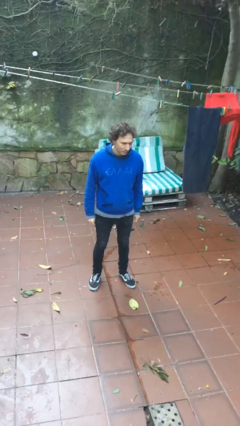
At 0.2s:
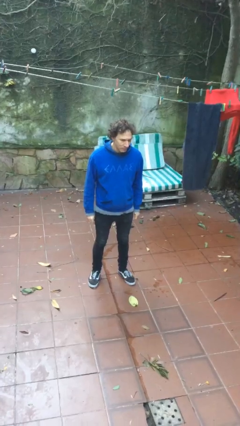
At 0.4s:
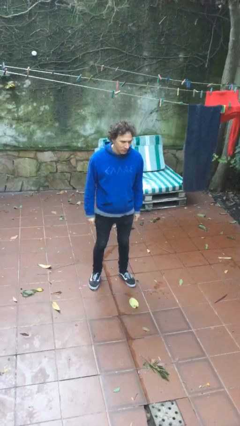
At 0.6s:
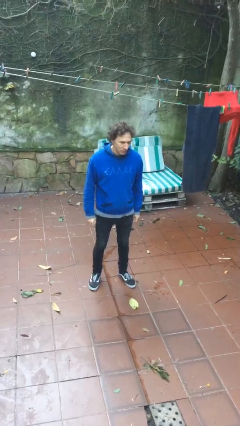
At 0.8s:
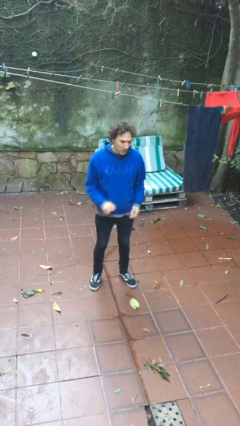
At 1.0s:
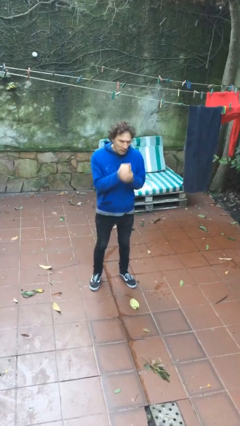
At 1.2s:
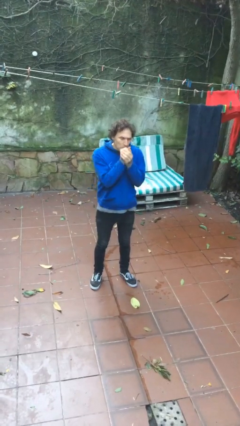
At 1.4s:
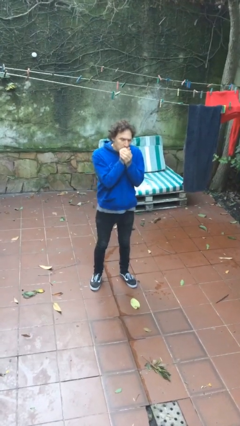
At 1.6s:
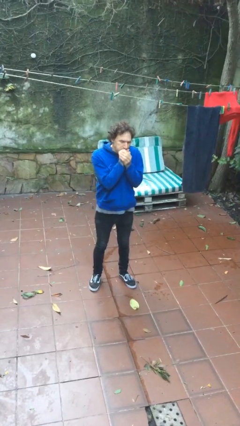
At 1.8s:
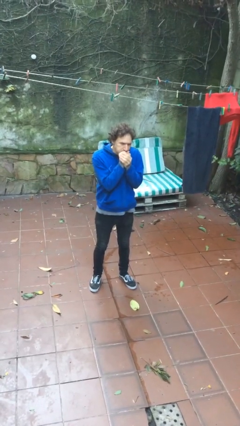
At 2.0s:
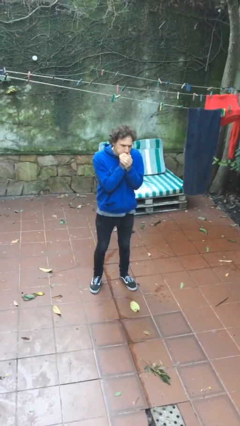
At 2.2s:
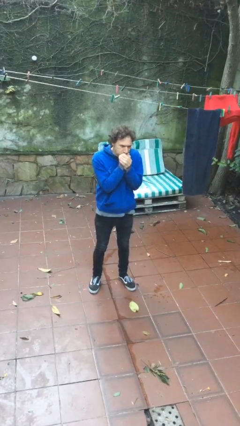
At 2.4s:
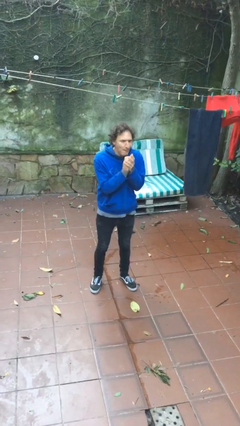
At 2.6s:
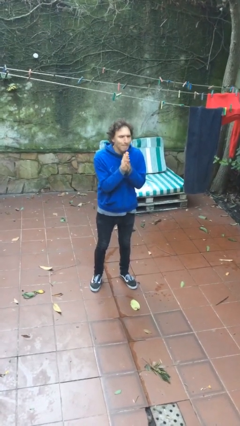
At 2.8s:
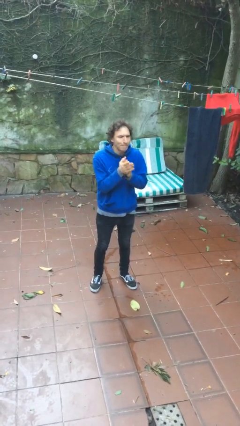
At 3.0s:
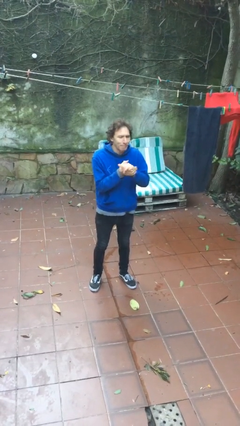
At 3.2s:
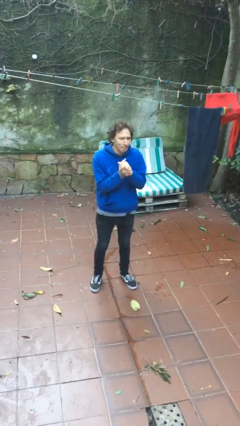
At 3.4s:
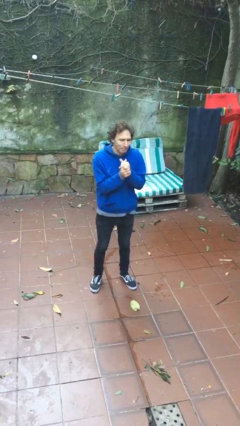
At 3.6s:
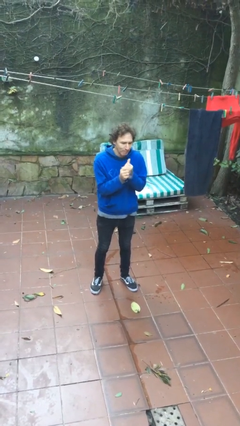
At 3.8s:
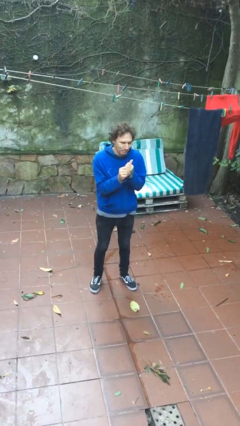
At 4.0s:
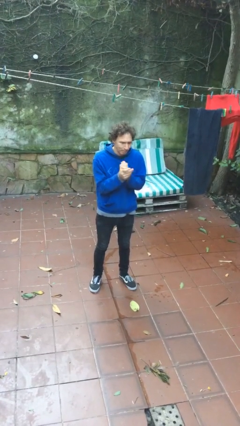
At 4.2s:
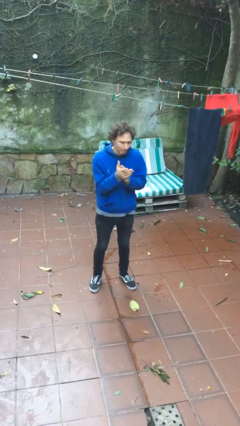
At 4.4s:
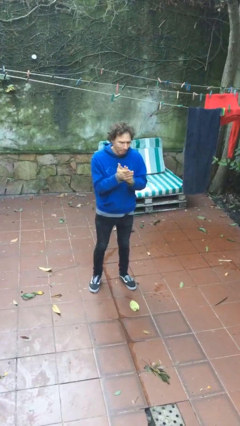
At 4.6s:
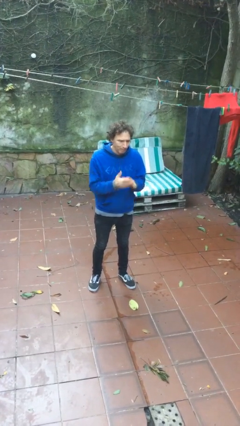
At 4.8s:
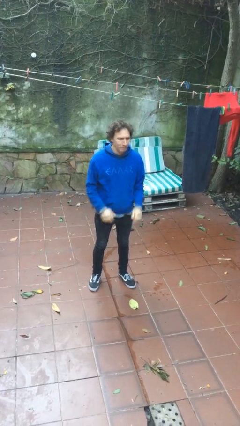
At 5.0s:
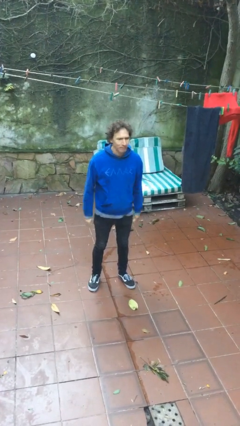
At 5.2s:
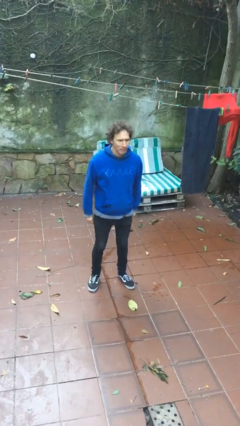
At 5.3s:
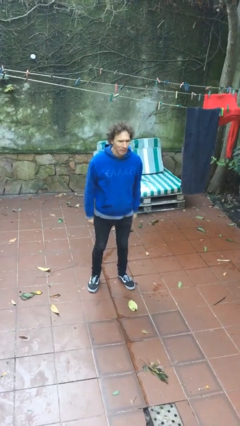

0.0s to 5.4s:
person blows into hands

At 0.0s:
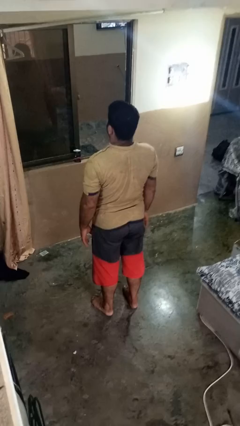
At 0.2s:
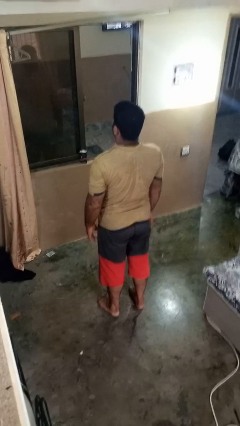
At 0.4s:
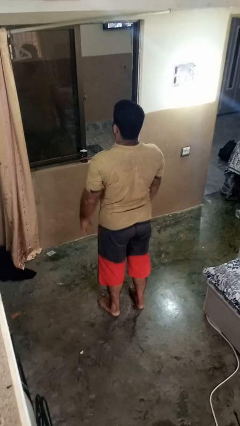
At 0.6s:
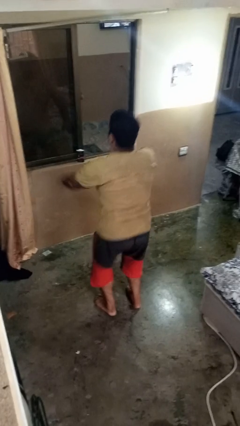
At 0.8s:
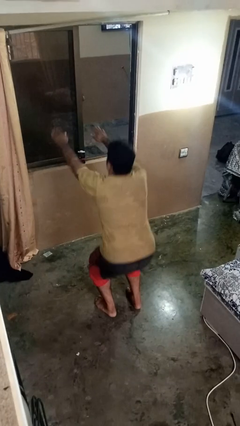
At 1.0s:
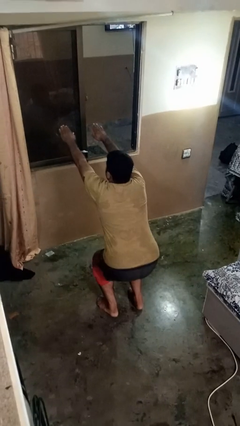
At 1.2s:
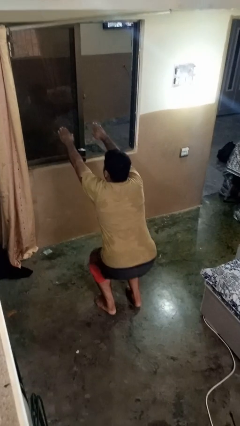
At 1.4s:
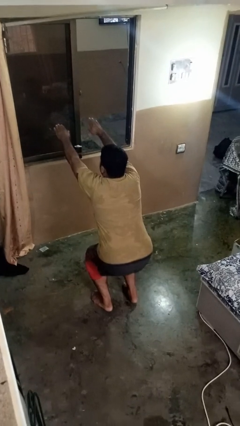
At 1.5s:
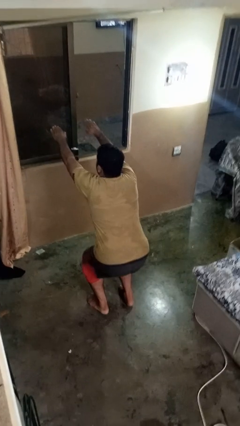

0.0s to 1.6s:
person squats

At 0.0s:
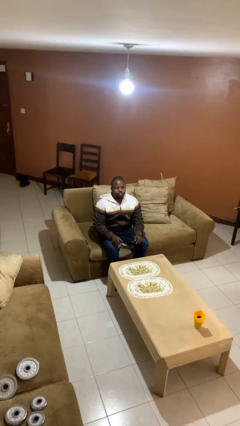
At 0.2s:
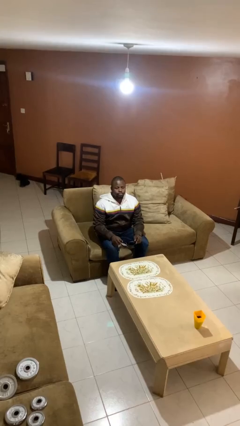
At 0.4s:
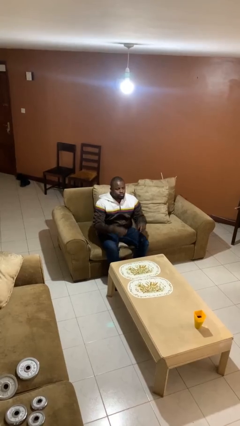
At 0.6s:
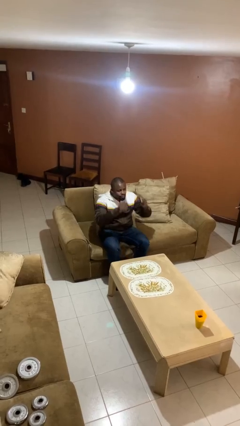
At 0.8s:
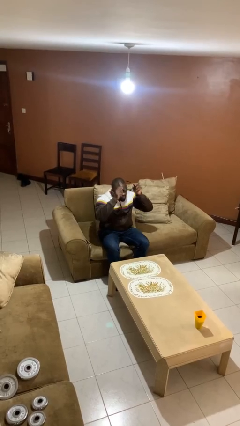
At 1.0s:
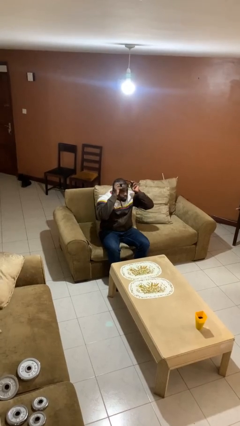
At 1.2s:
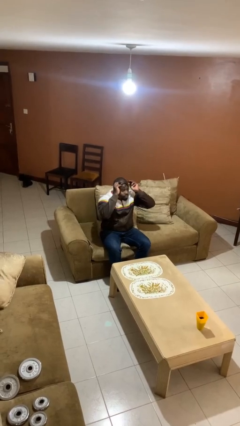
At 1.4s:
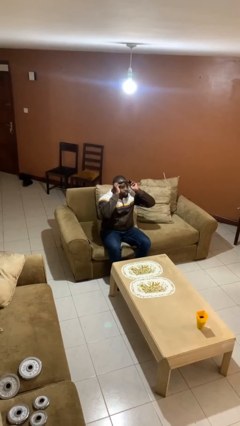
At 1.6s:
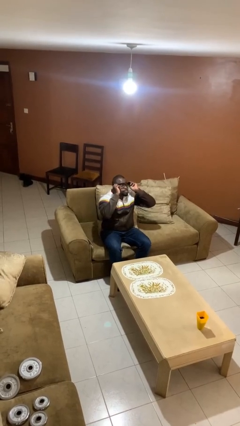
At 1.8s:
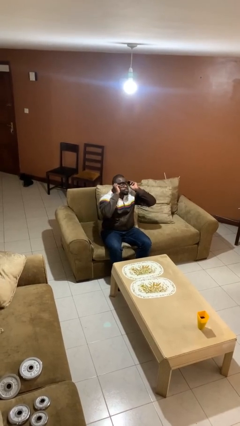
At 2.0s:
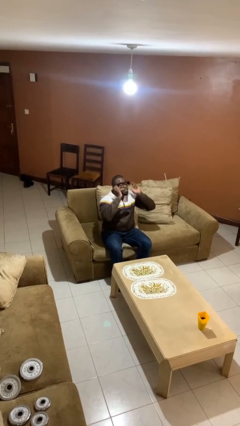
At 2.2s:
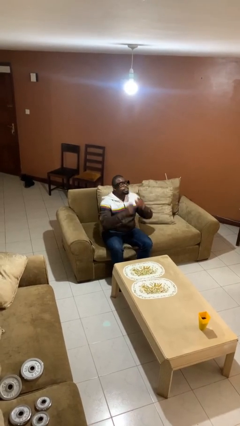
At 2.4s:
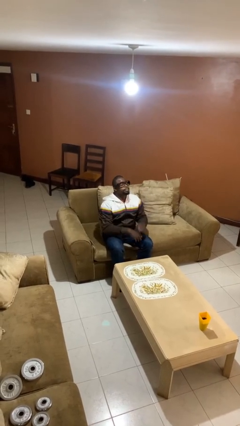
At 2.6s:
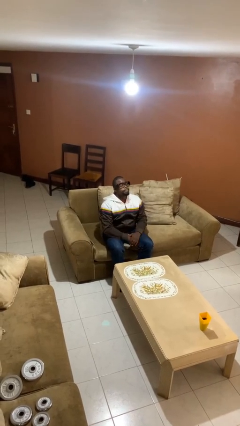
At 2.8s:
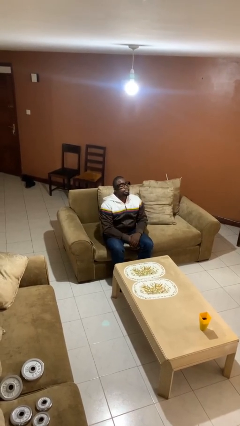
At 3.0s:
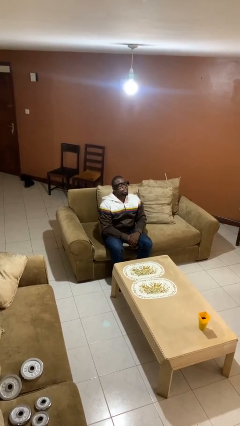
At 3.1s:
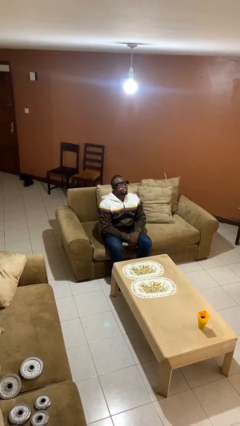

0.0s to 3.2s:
person puts on glasses

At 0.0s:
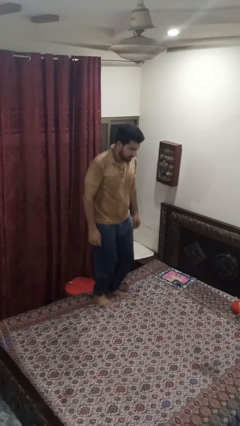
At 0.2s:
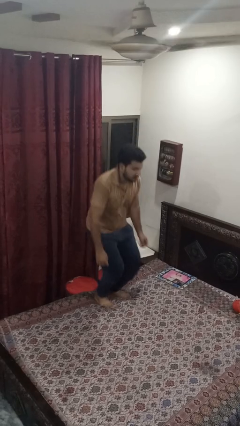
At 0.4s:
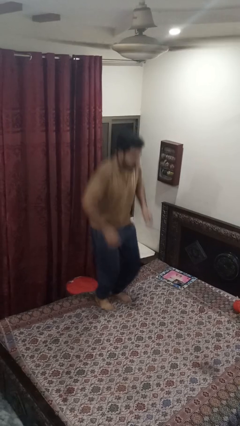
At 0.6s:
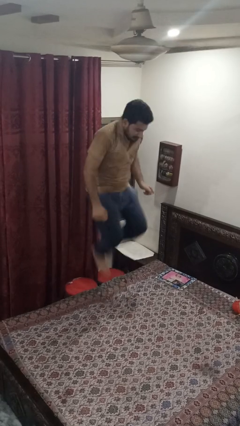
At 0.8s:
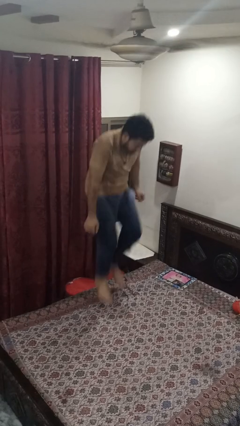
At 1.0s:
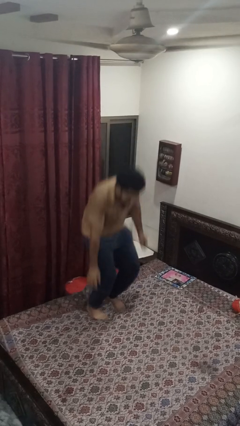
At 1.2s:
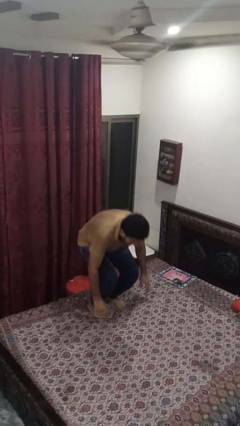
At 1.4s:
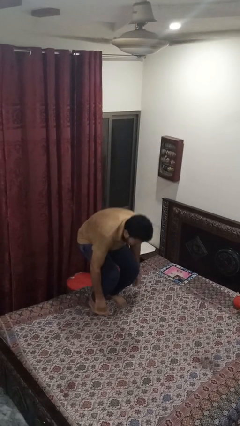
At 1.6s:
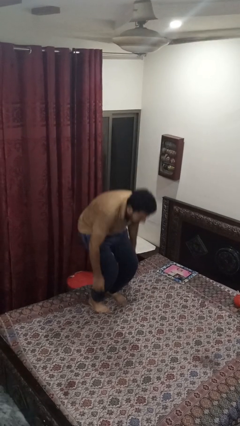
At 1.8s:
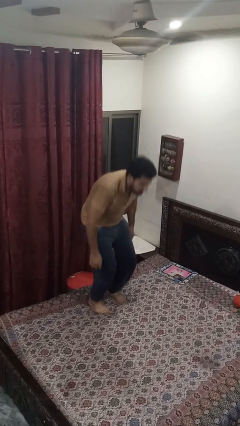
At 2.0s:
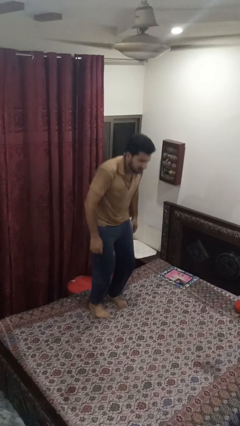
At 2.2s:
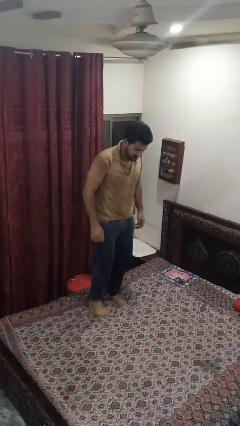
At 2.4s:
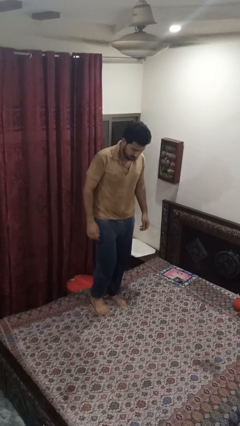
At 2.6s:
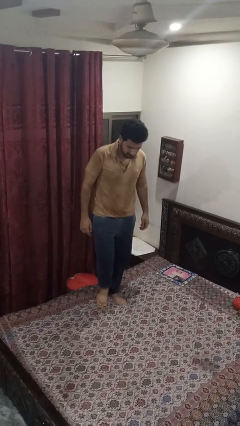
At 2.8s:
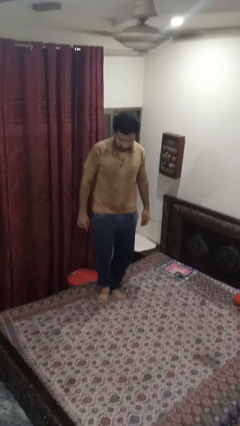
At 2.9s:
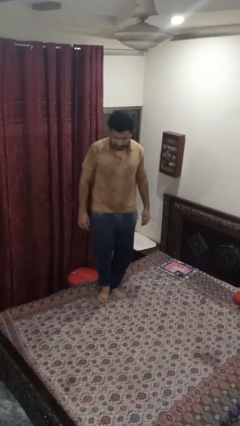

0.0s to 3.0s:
person jumps on bed

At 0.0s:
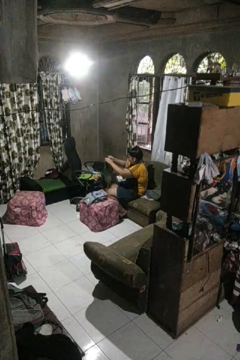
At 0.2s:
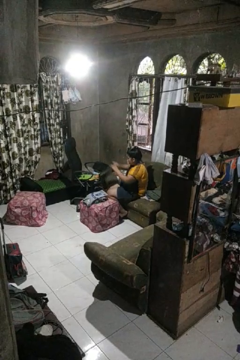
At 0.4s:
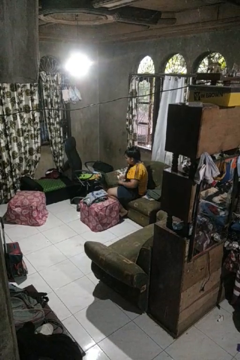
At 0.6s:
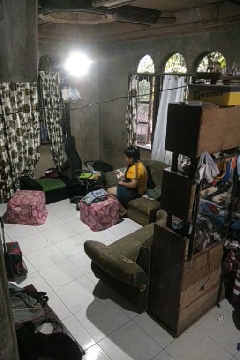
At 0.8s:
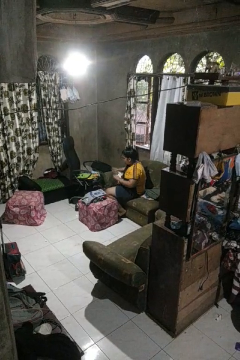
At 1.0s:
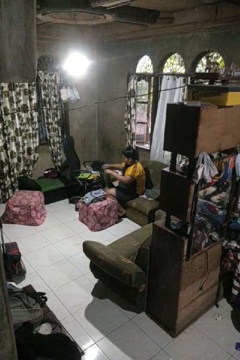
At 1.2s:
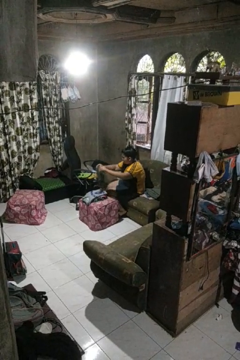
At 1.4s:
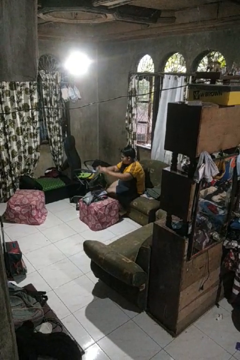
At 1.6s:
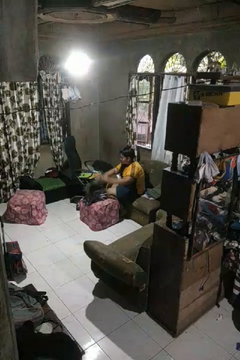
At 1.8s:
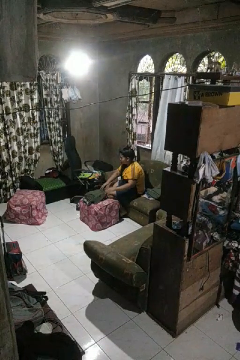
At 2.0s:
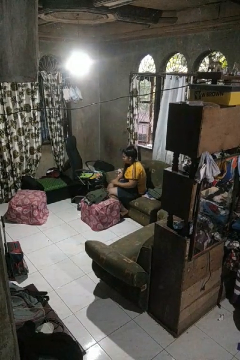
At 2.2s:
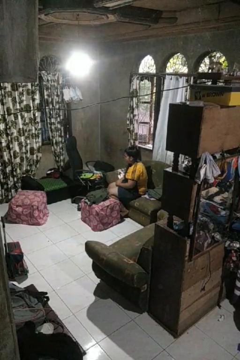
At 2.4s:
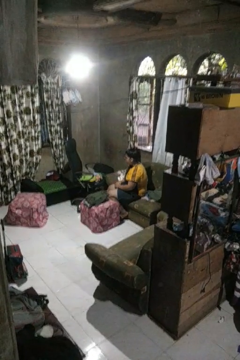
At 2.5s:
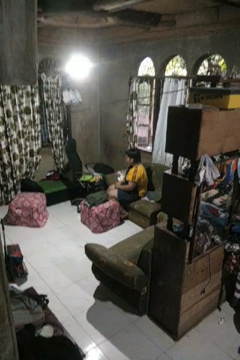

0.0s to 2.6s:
person folds shirt

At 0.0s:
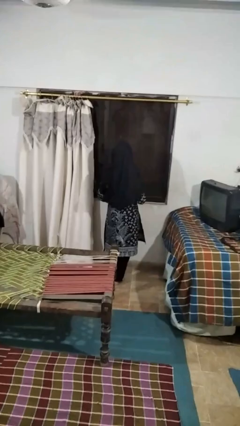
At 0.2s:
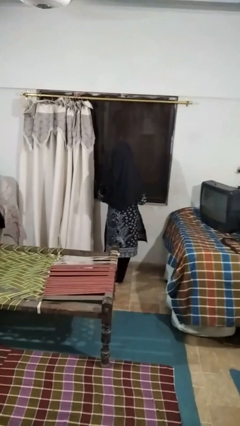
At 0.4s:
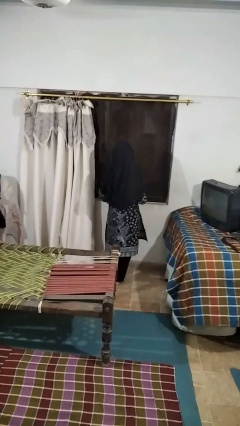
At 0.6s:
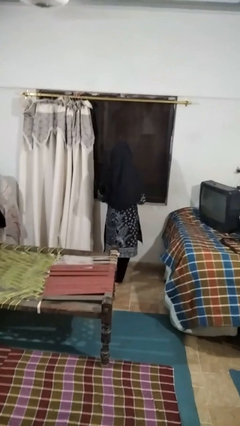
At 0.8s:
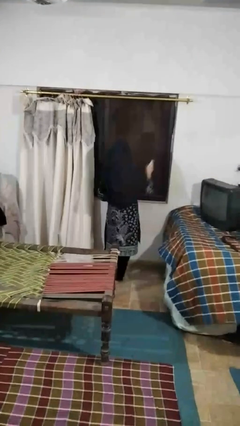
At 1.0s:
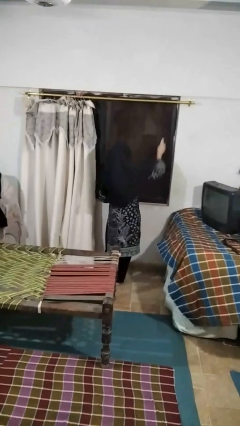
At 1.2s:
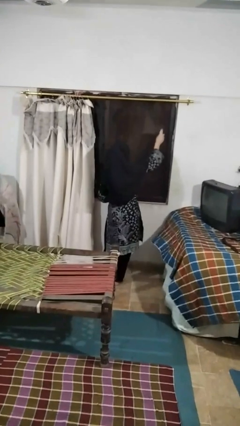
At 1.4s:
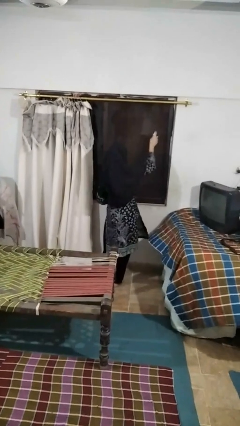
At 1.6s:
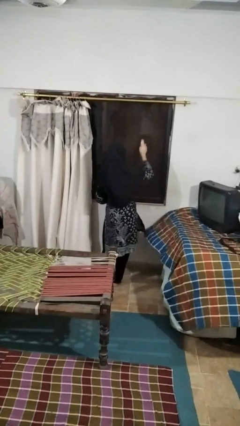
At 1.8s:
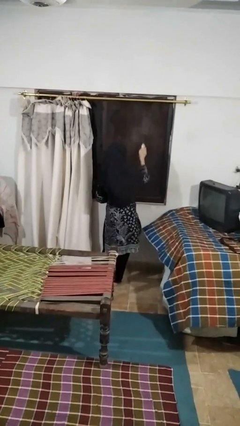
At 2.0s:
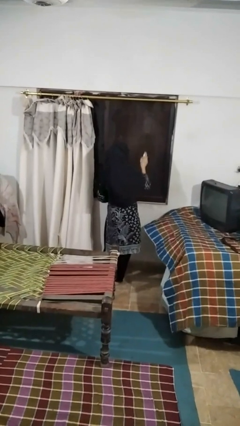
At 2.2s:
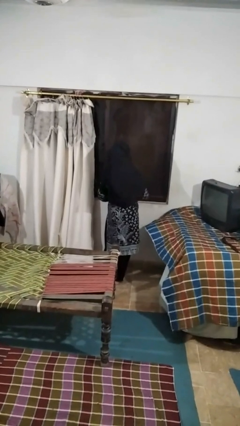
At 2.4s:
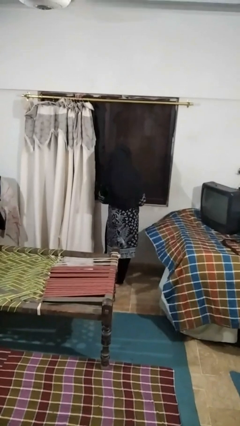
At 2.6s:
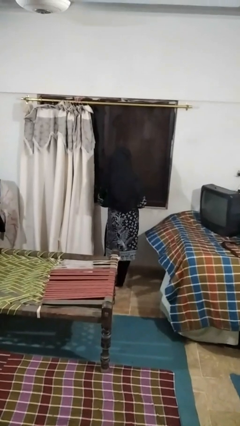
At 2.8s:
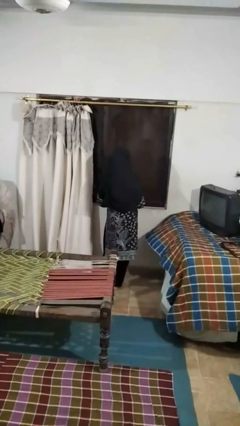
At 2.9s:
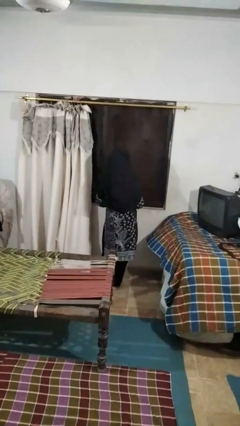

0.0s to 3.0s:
person sprays from bottle
